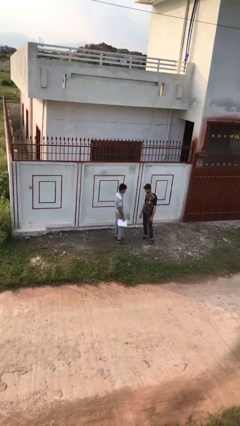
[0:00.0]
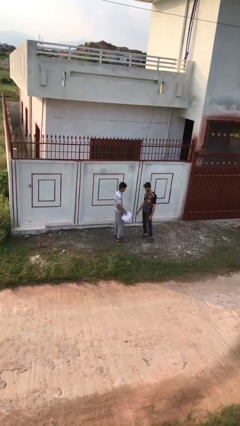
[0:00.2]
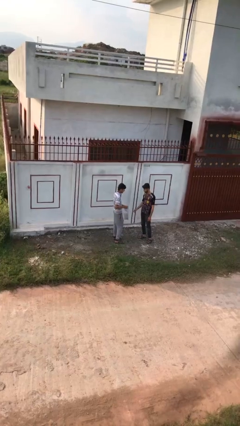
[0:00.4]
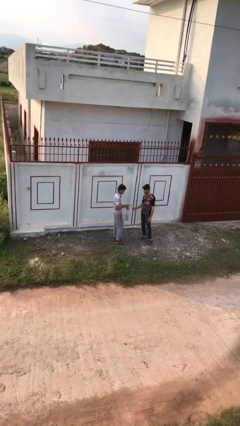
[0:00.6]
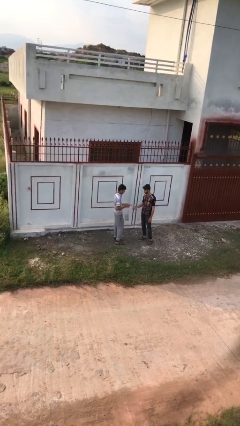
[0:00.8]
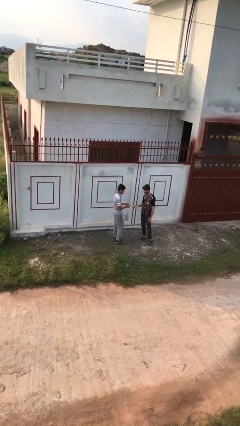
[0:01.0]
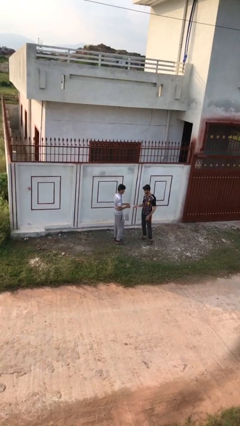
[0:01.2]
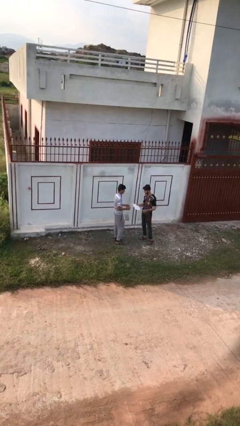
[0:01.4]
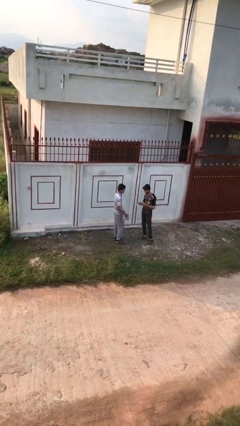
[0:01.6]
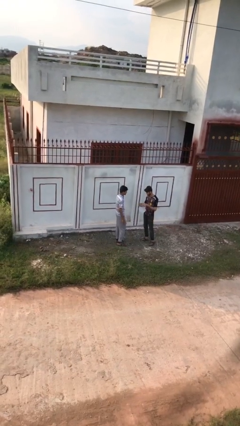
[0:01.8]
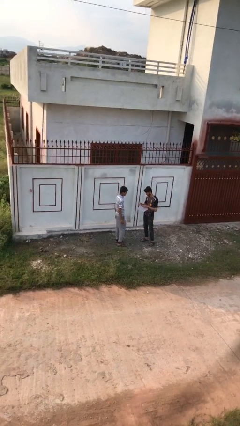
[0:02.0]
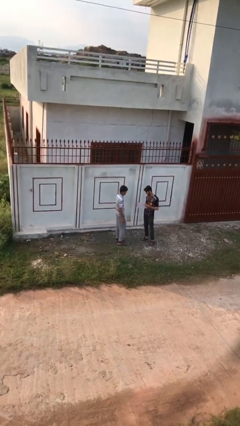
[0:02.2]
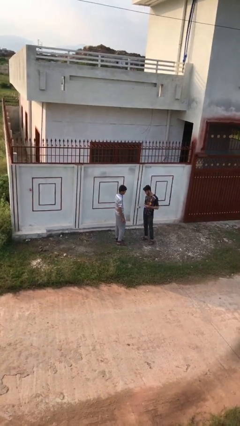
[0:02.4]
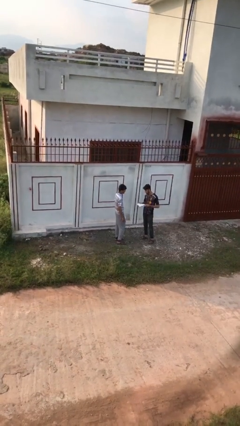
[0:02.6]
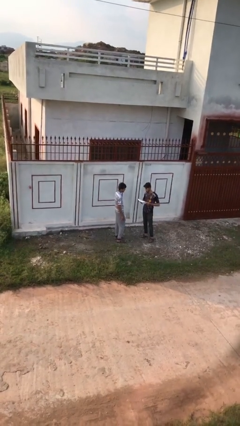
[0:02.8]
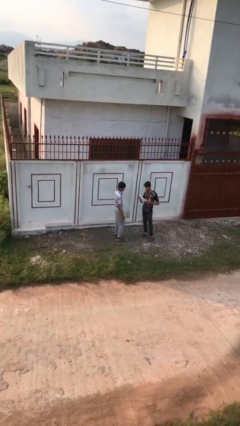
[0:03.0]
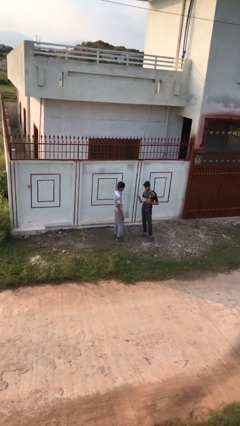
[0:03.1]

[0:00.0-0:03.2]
person transfers object to person

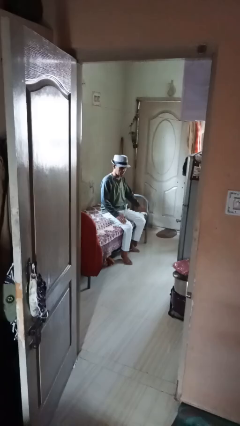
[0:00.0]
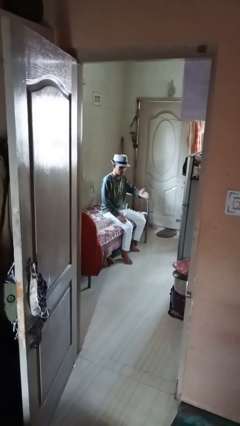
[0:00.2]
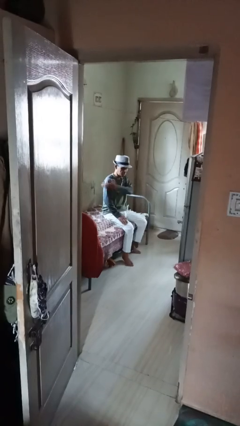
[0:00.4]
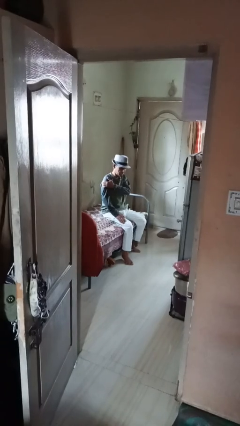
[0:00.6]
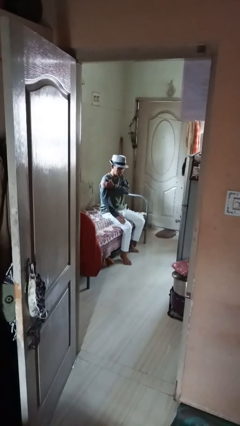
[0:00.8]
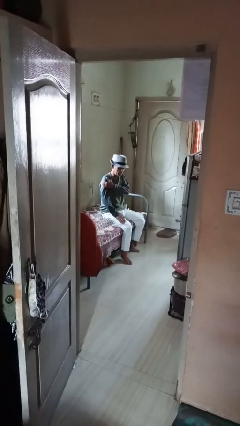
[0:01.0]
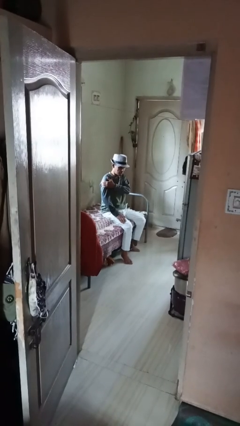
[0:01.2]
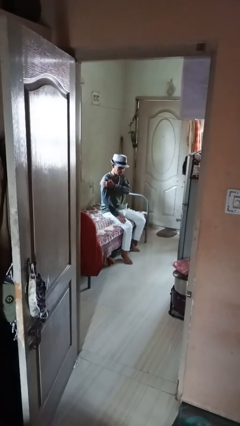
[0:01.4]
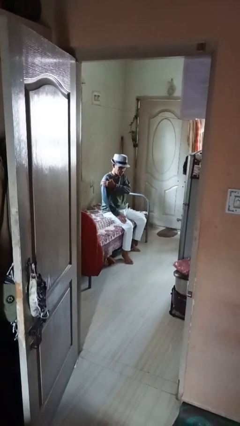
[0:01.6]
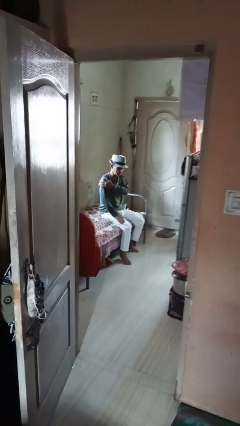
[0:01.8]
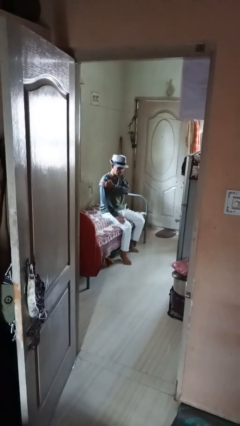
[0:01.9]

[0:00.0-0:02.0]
person swats bug

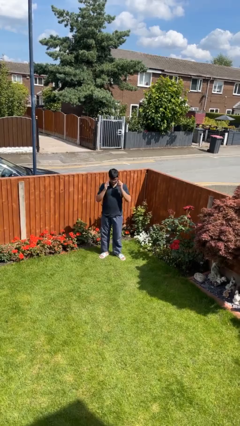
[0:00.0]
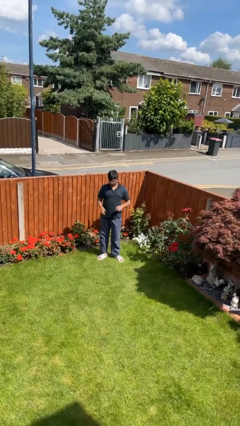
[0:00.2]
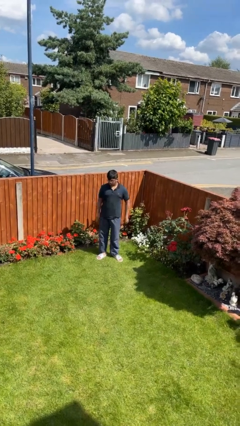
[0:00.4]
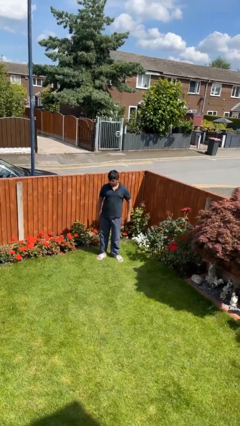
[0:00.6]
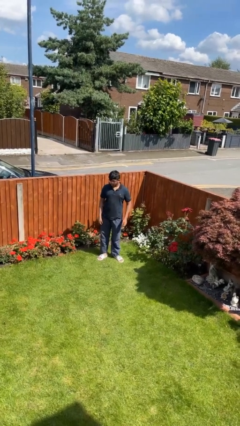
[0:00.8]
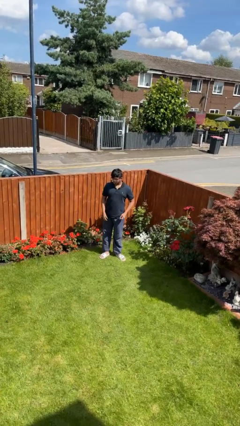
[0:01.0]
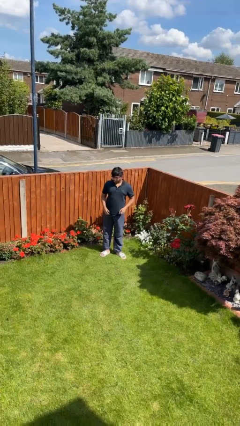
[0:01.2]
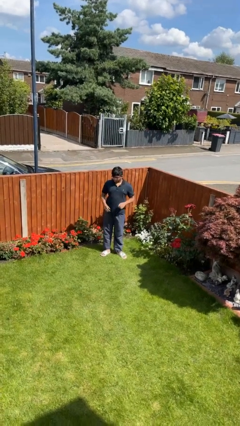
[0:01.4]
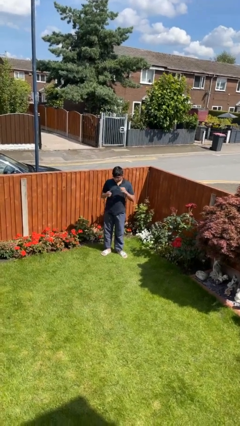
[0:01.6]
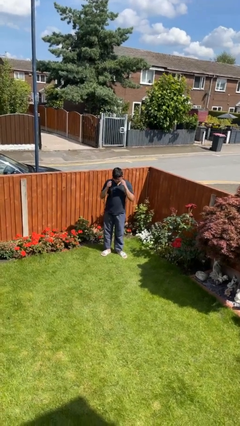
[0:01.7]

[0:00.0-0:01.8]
person puts on glasses

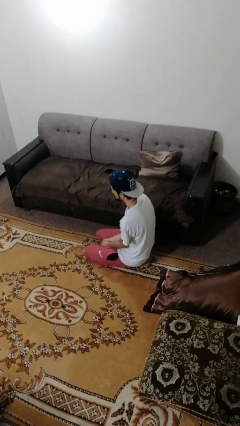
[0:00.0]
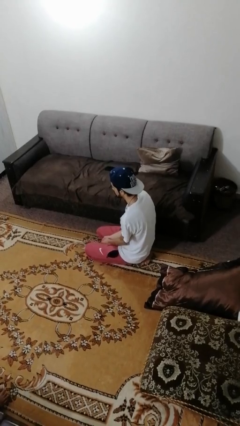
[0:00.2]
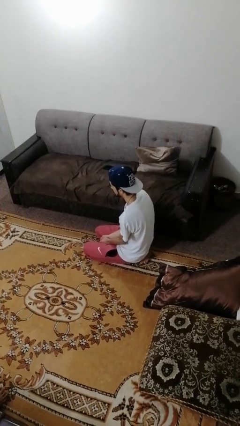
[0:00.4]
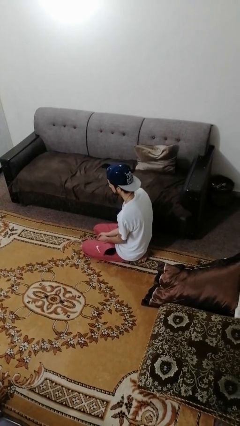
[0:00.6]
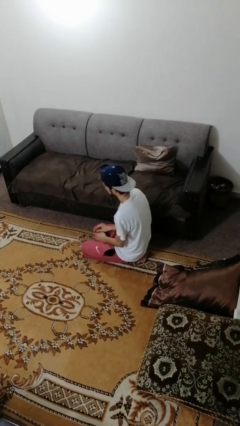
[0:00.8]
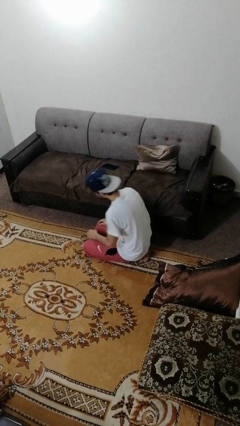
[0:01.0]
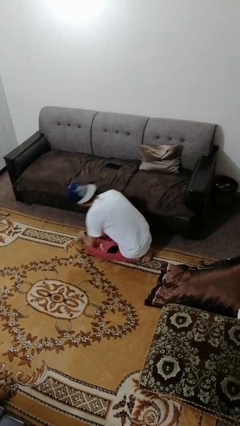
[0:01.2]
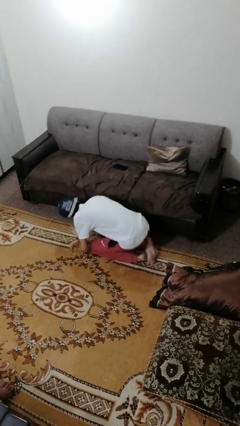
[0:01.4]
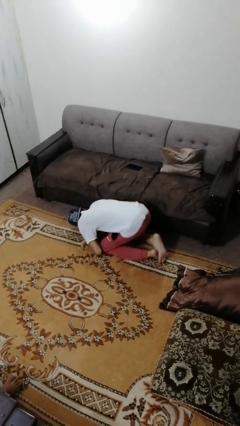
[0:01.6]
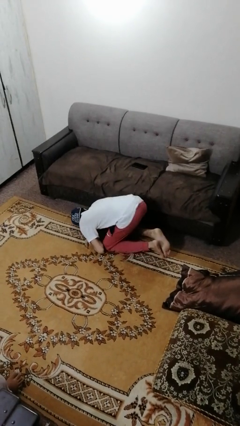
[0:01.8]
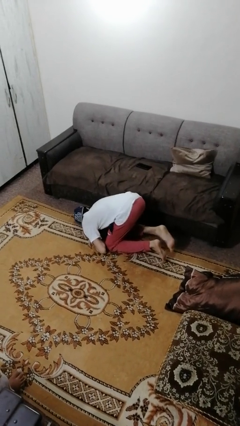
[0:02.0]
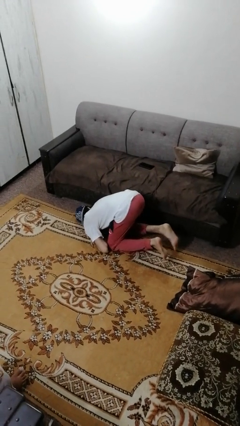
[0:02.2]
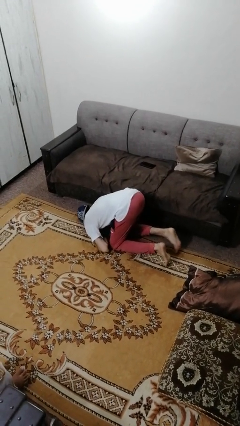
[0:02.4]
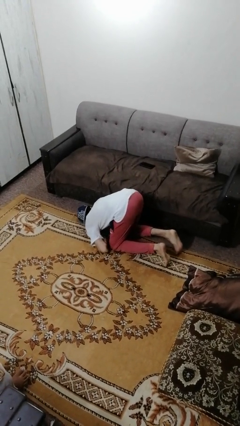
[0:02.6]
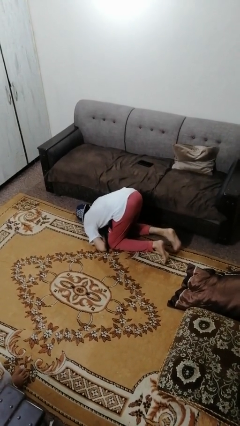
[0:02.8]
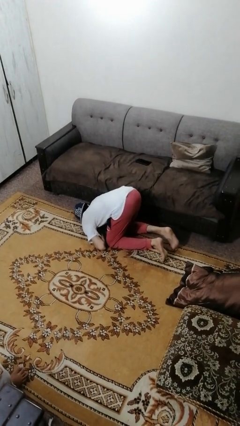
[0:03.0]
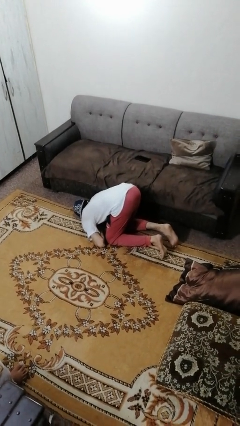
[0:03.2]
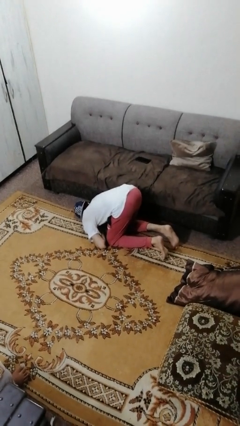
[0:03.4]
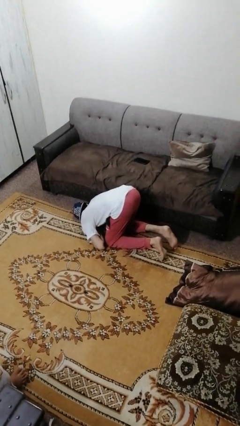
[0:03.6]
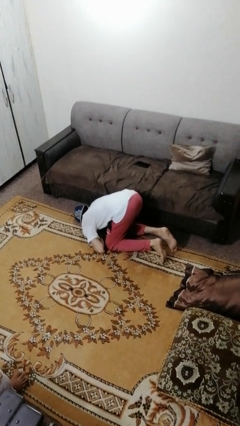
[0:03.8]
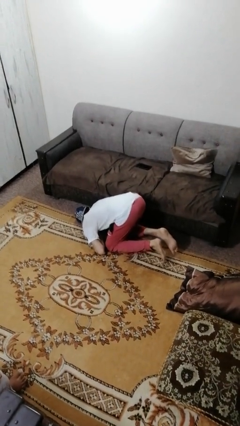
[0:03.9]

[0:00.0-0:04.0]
person searches under couch

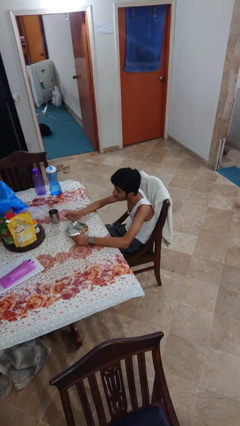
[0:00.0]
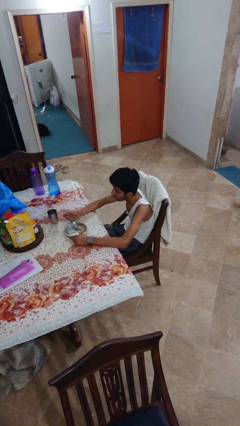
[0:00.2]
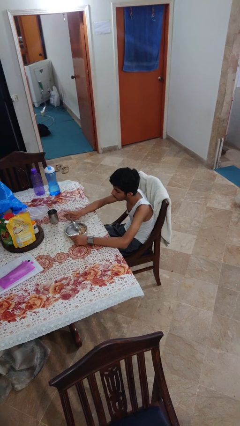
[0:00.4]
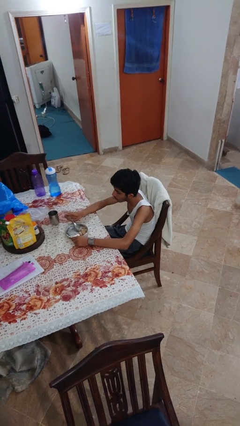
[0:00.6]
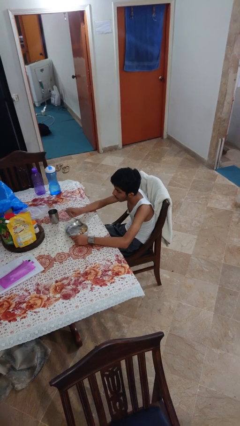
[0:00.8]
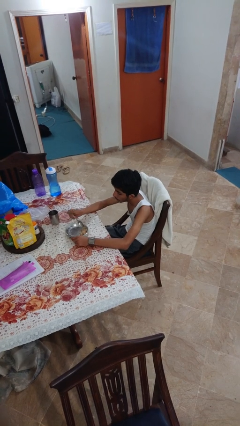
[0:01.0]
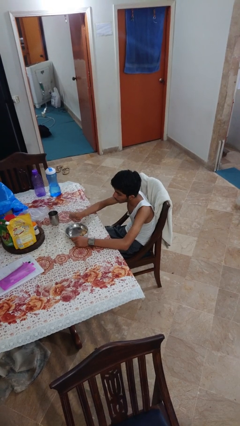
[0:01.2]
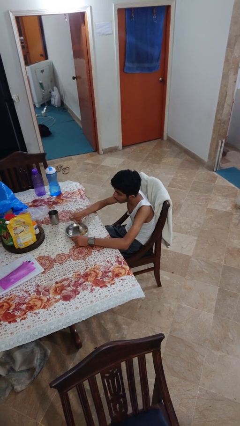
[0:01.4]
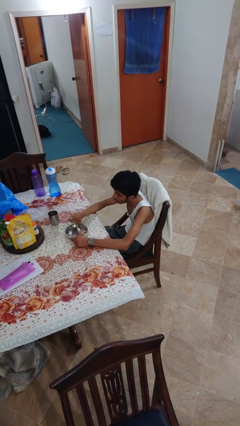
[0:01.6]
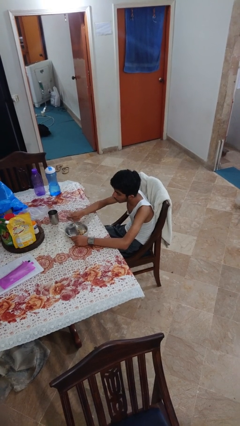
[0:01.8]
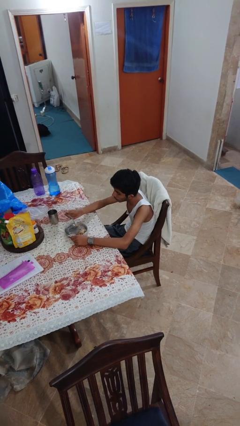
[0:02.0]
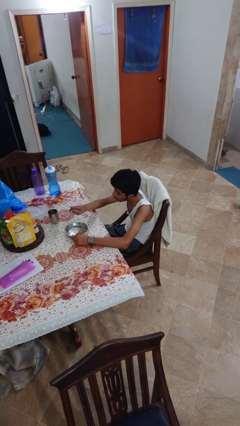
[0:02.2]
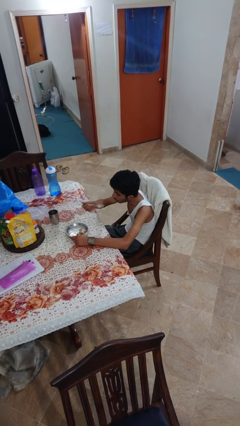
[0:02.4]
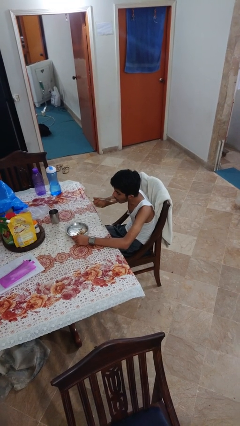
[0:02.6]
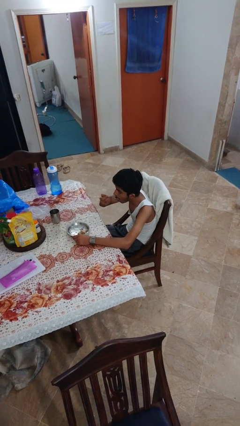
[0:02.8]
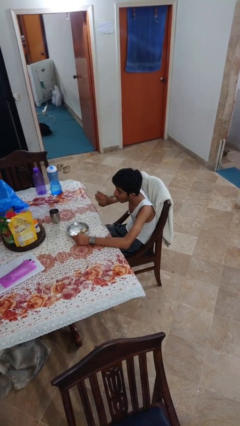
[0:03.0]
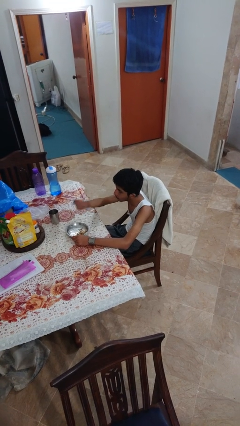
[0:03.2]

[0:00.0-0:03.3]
person eats with utensil

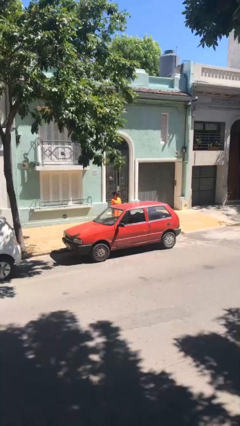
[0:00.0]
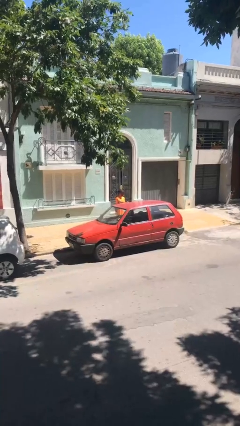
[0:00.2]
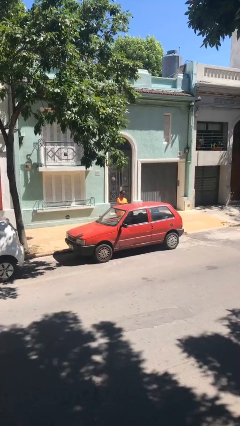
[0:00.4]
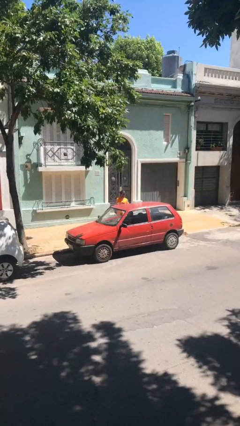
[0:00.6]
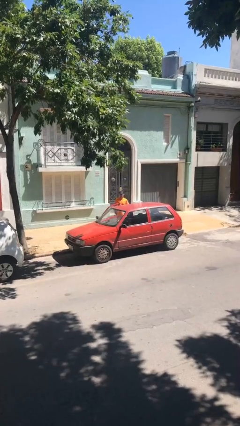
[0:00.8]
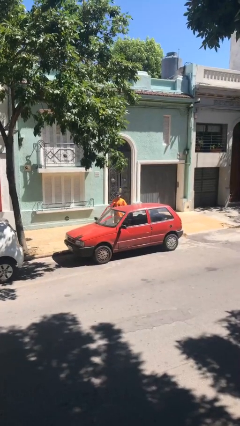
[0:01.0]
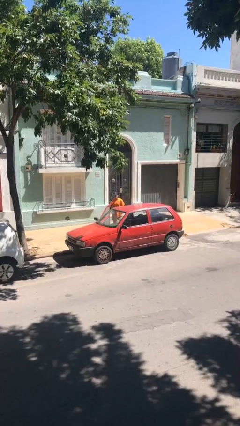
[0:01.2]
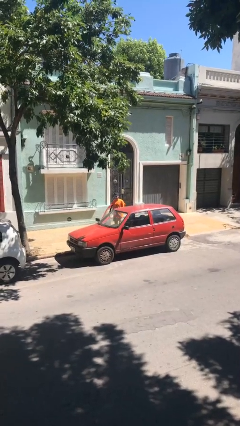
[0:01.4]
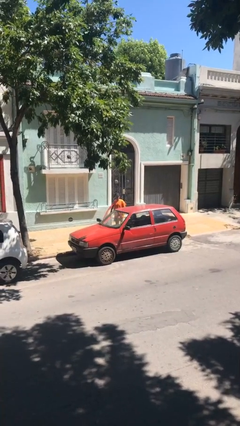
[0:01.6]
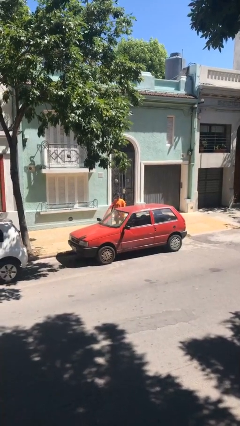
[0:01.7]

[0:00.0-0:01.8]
person opens car door

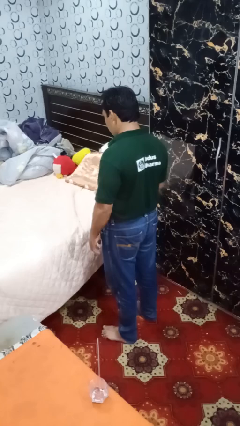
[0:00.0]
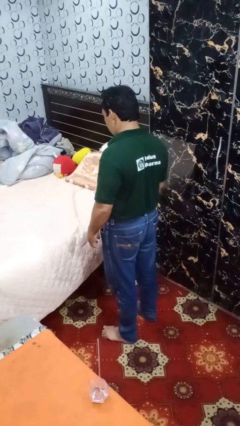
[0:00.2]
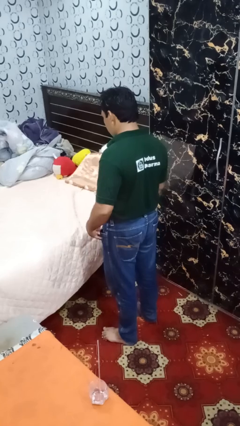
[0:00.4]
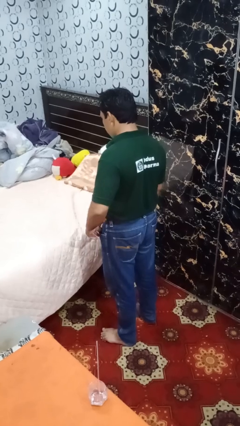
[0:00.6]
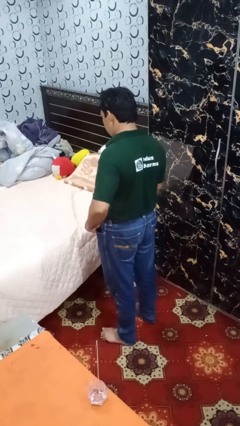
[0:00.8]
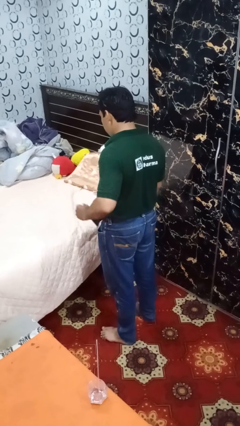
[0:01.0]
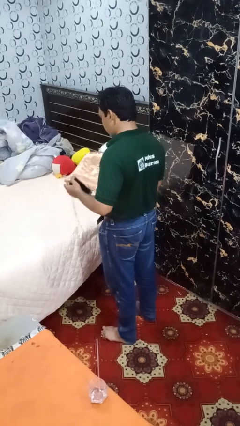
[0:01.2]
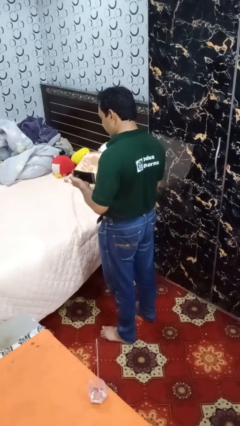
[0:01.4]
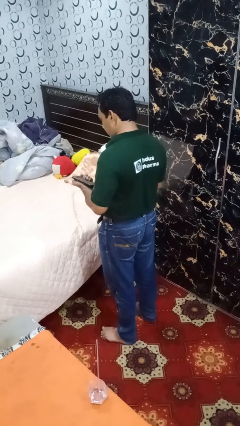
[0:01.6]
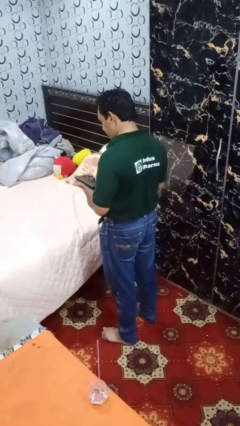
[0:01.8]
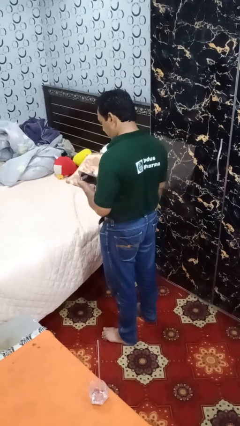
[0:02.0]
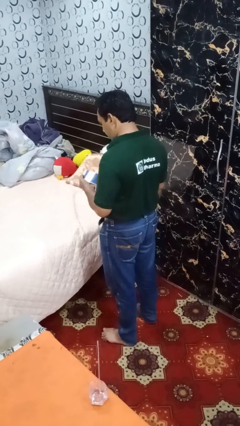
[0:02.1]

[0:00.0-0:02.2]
person takes phone from pocket
